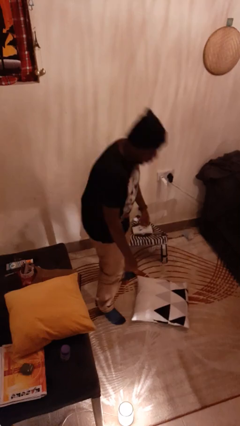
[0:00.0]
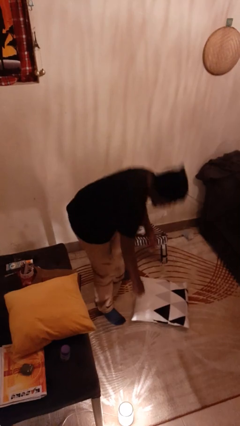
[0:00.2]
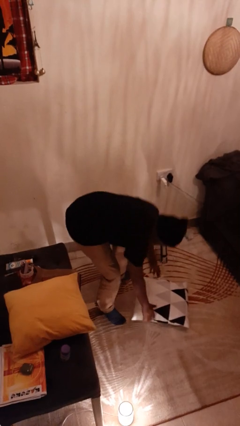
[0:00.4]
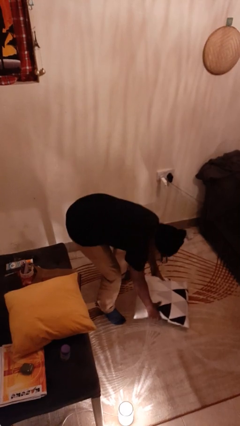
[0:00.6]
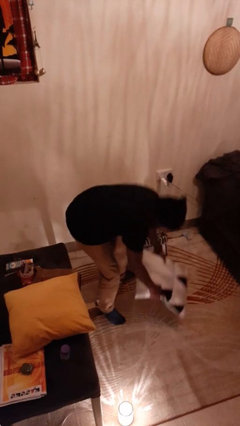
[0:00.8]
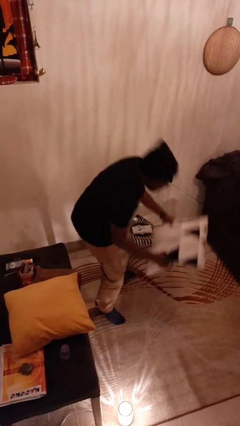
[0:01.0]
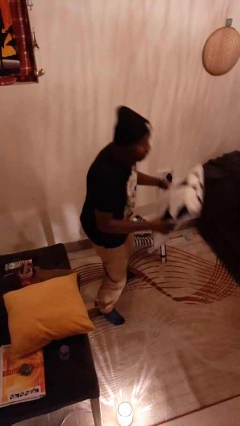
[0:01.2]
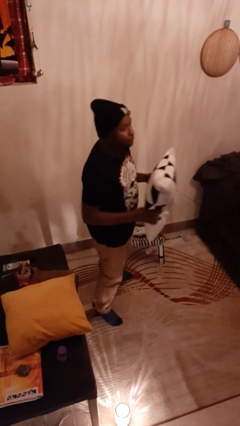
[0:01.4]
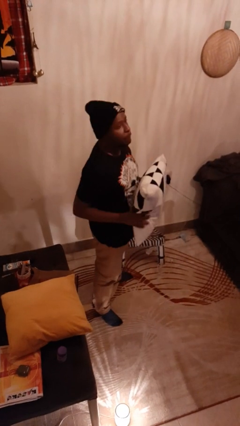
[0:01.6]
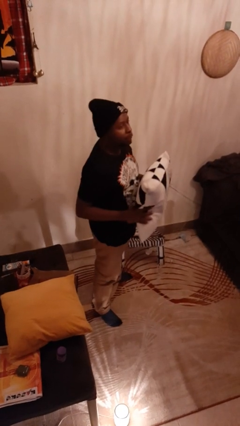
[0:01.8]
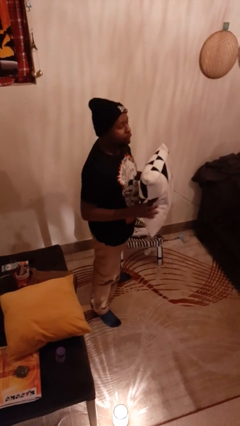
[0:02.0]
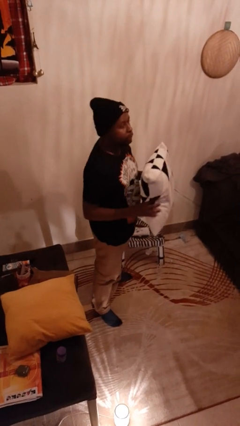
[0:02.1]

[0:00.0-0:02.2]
person picks up object from floor

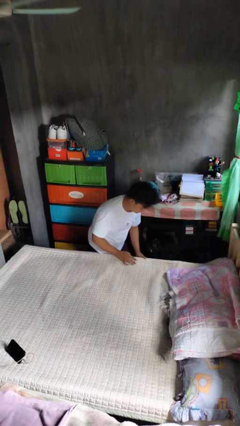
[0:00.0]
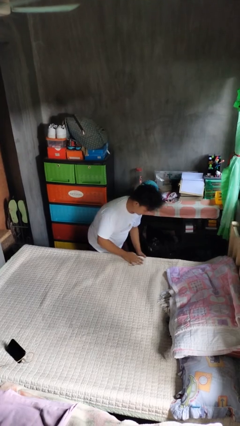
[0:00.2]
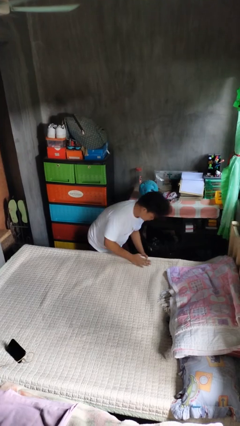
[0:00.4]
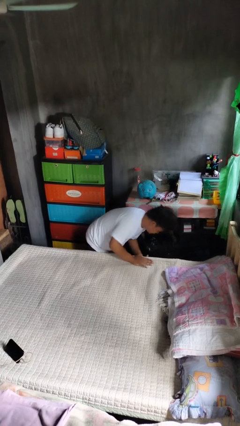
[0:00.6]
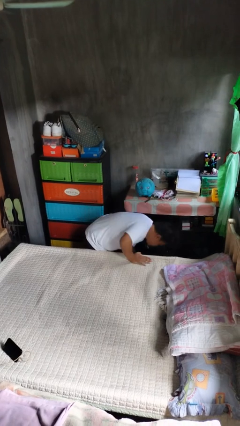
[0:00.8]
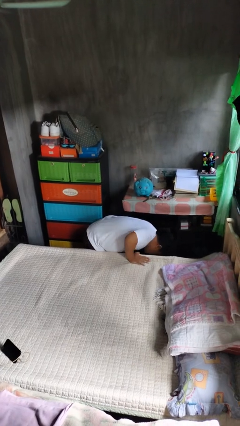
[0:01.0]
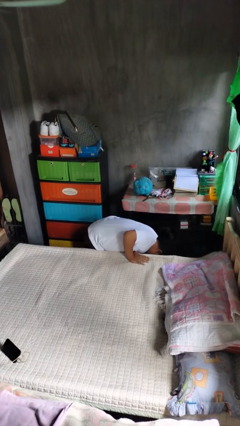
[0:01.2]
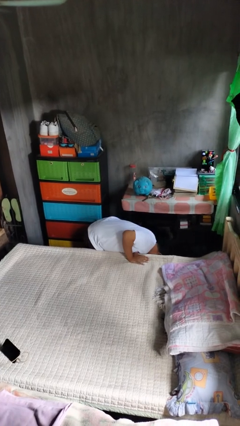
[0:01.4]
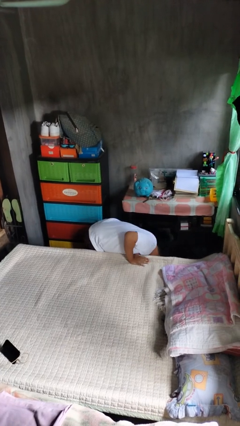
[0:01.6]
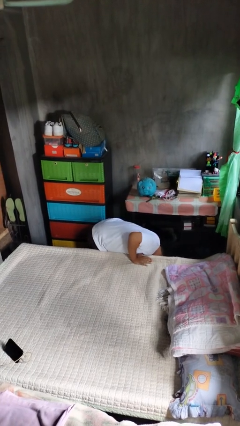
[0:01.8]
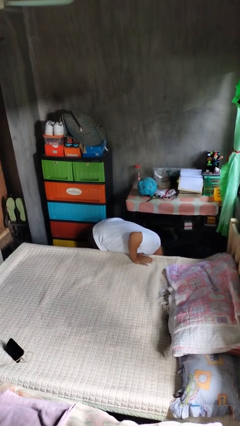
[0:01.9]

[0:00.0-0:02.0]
person searches under bed

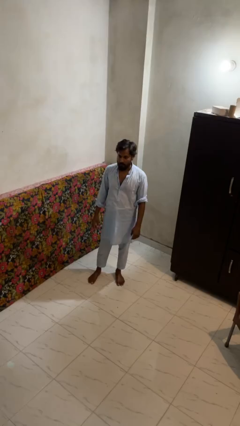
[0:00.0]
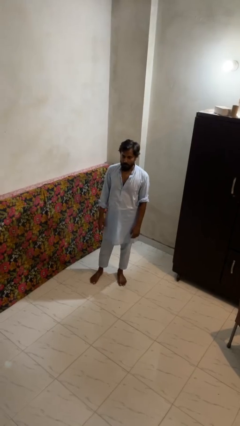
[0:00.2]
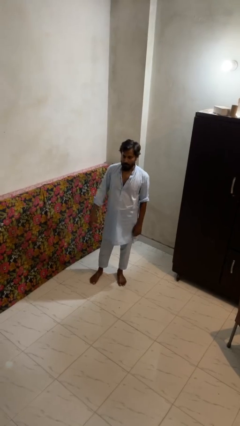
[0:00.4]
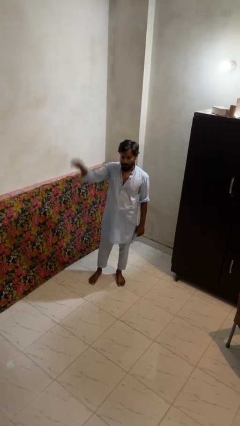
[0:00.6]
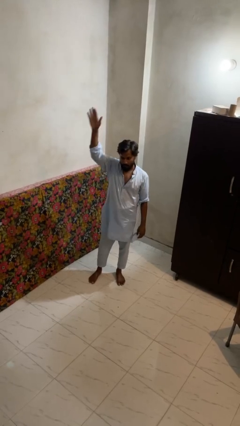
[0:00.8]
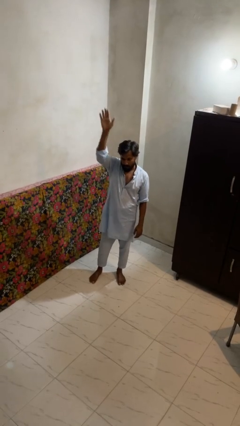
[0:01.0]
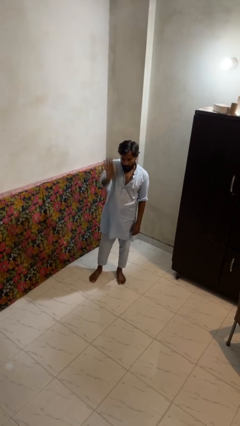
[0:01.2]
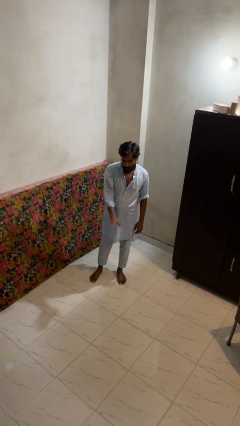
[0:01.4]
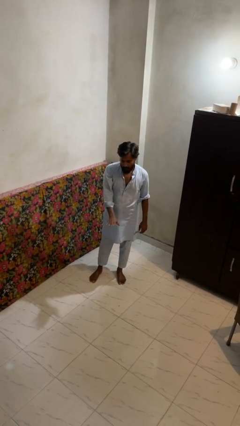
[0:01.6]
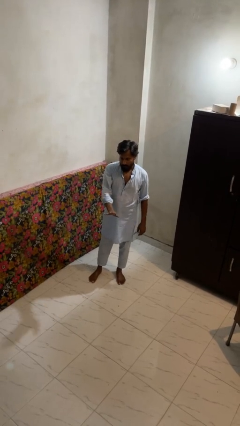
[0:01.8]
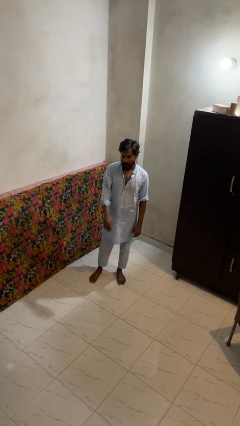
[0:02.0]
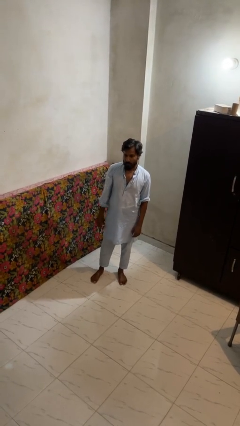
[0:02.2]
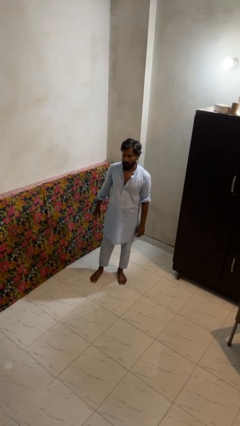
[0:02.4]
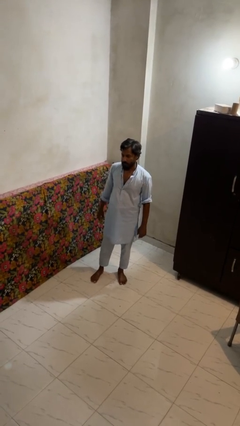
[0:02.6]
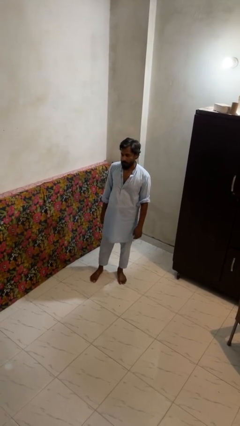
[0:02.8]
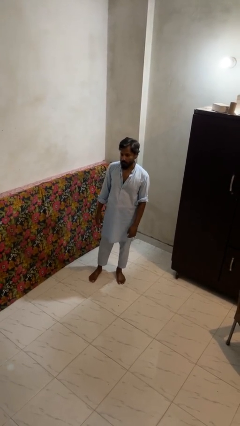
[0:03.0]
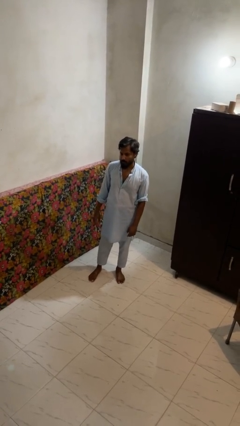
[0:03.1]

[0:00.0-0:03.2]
person gestures swipe down

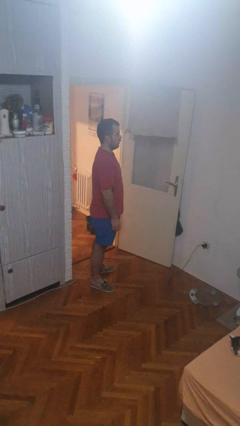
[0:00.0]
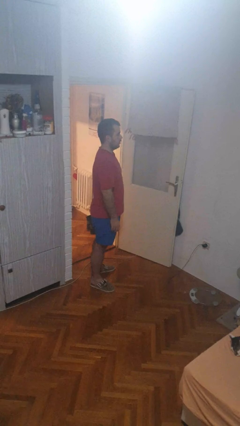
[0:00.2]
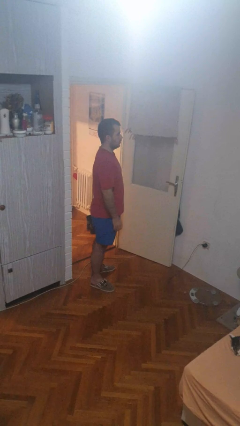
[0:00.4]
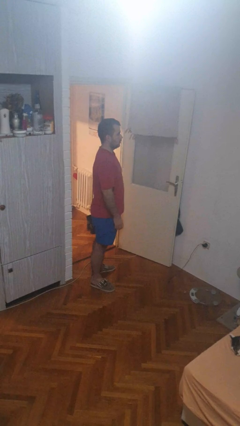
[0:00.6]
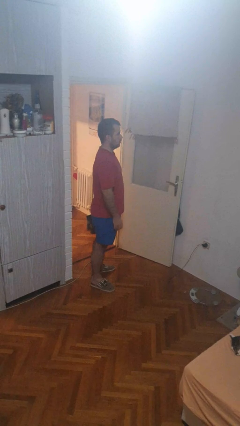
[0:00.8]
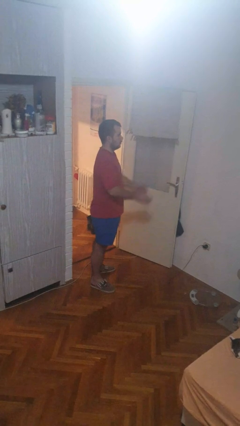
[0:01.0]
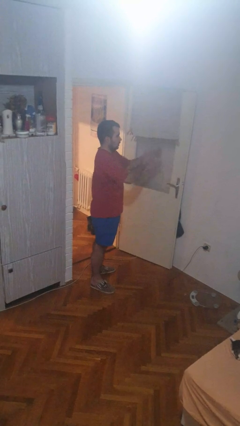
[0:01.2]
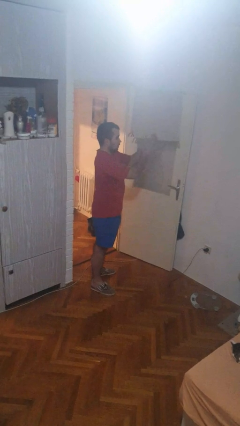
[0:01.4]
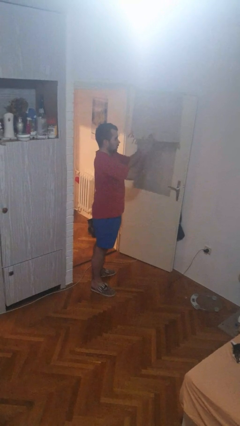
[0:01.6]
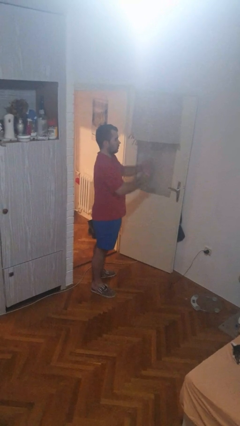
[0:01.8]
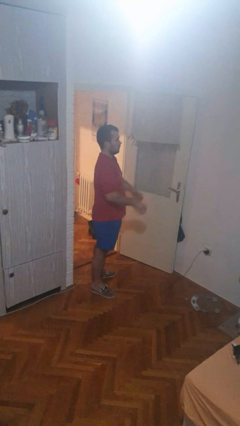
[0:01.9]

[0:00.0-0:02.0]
person claps hands

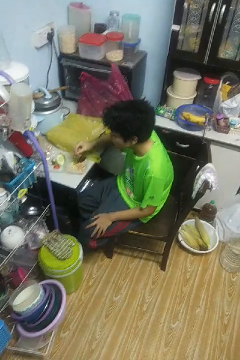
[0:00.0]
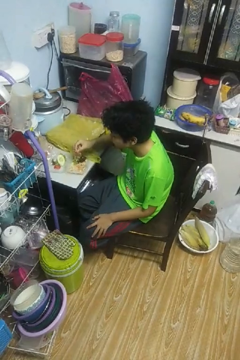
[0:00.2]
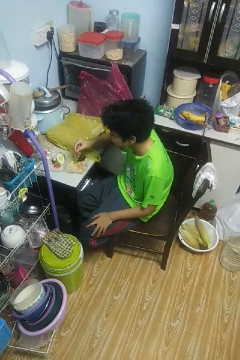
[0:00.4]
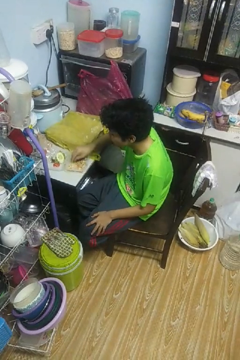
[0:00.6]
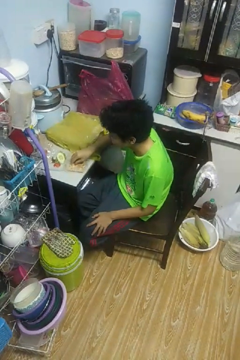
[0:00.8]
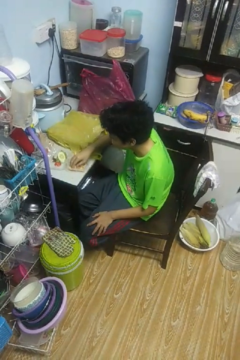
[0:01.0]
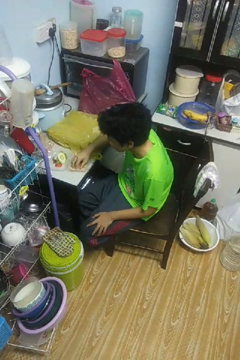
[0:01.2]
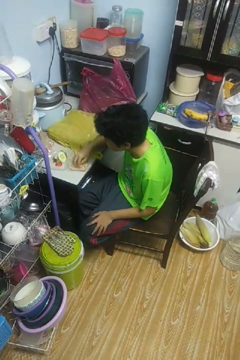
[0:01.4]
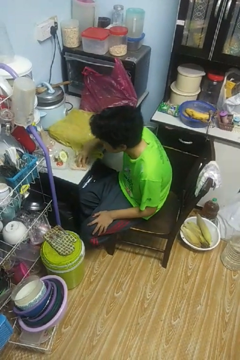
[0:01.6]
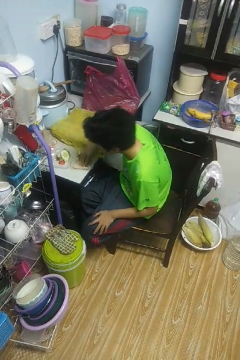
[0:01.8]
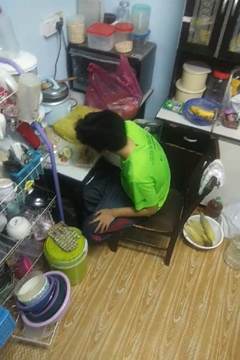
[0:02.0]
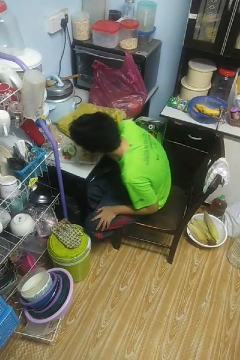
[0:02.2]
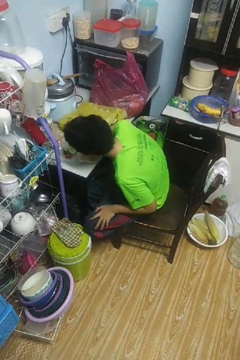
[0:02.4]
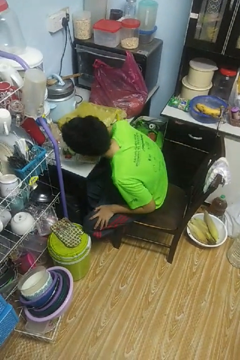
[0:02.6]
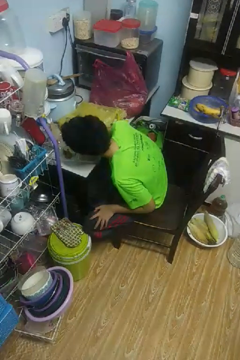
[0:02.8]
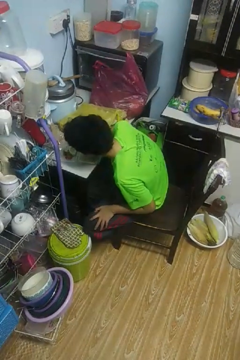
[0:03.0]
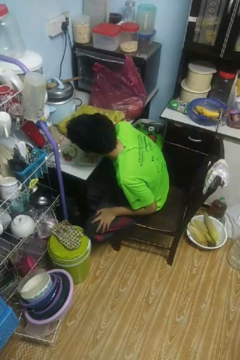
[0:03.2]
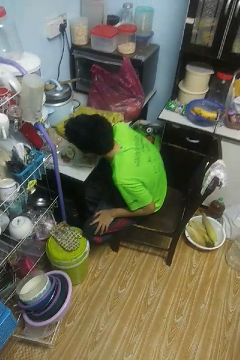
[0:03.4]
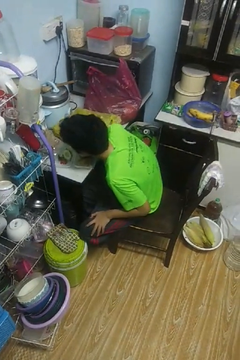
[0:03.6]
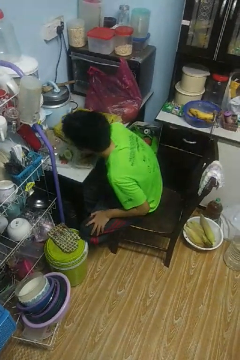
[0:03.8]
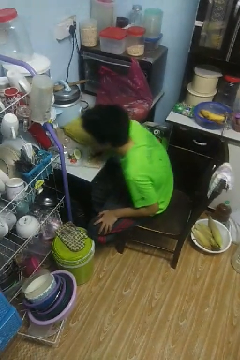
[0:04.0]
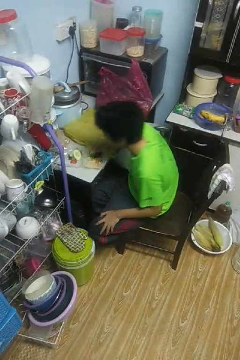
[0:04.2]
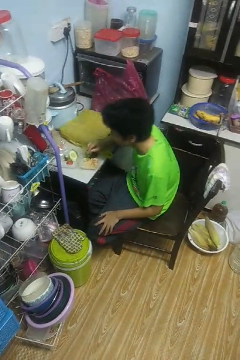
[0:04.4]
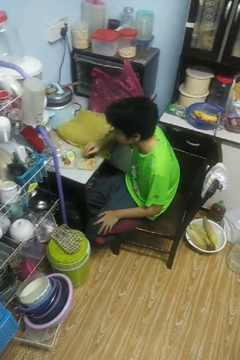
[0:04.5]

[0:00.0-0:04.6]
person eats with hands

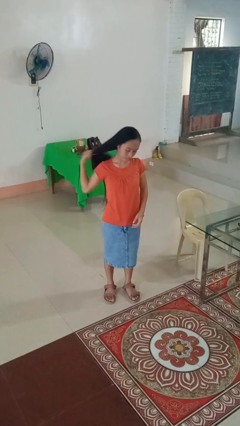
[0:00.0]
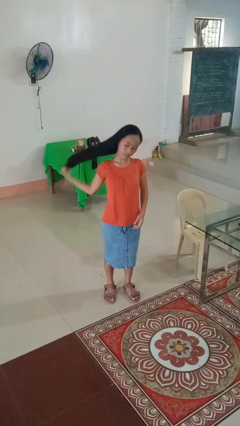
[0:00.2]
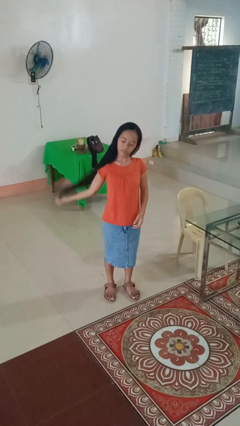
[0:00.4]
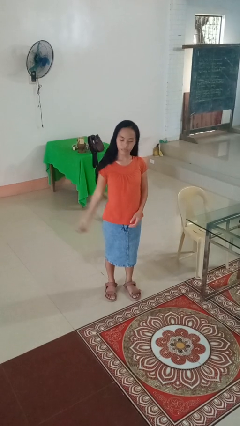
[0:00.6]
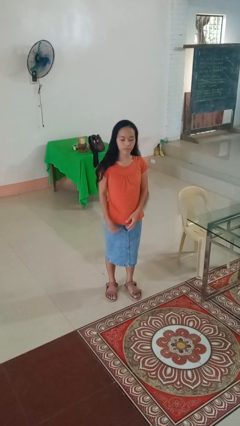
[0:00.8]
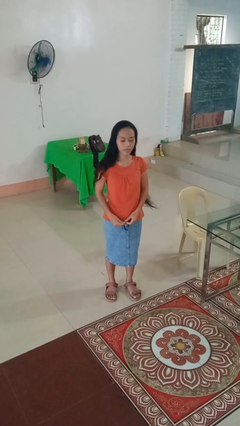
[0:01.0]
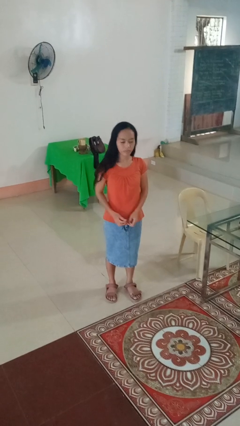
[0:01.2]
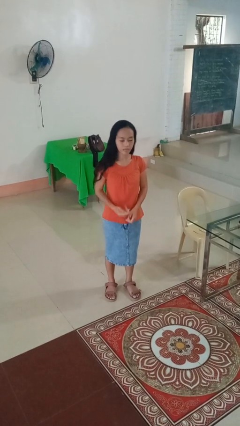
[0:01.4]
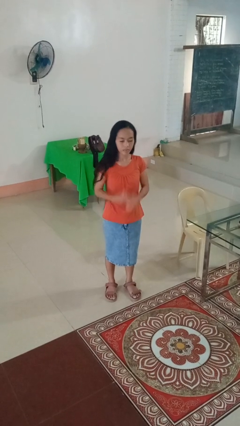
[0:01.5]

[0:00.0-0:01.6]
person takes off hairtie

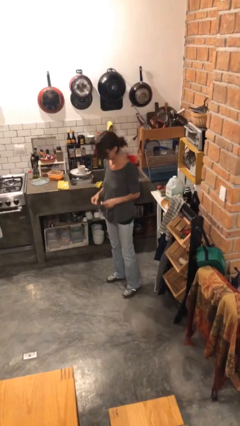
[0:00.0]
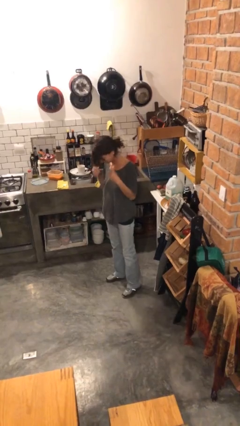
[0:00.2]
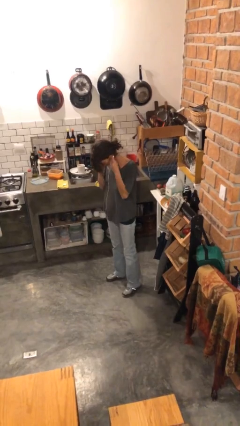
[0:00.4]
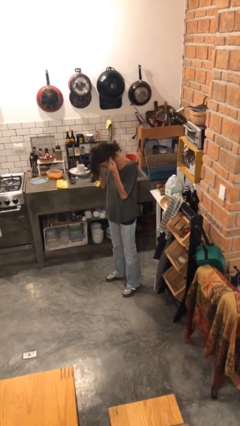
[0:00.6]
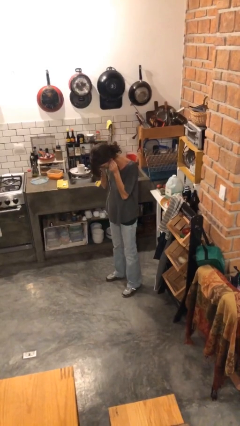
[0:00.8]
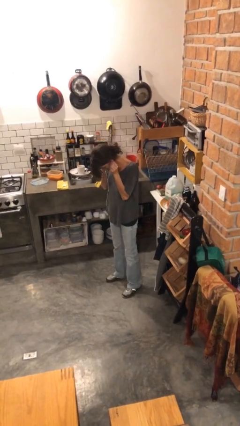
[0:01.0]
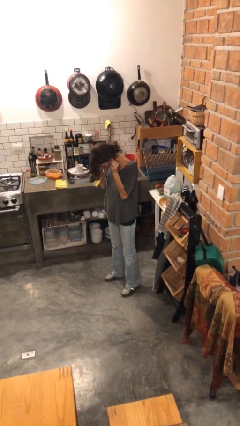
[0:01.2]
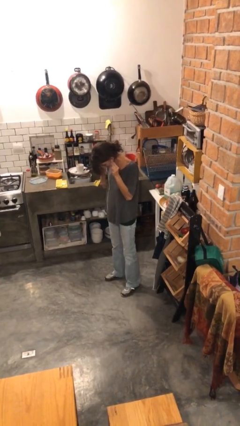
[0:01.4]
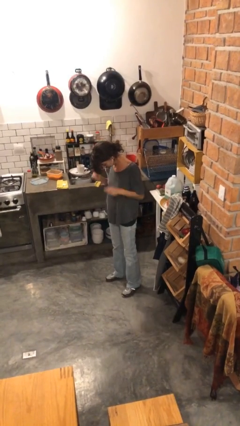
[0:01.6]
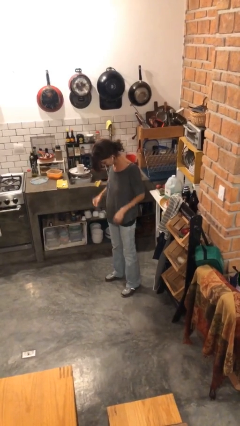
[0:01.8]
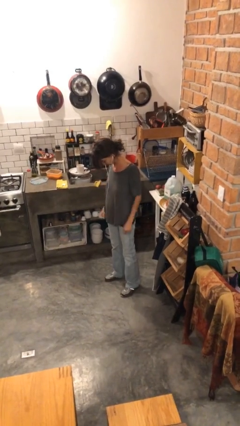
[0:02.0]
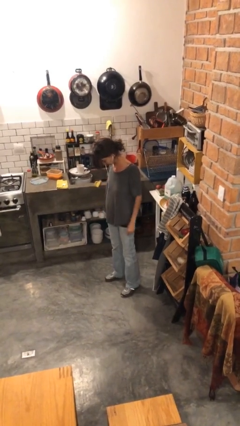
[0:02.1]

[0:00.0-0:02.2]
person puts on headphones
